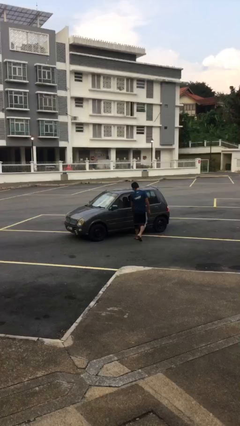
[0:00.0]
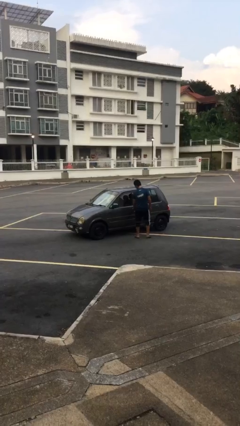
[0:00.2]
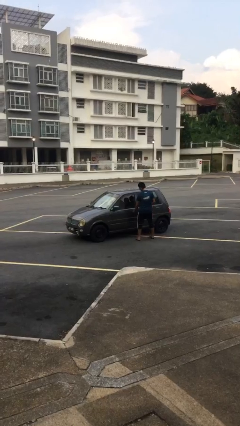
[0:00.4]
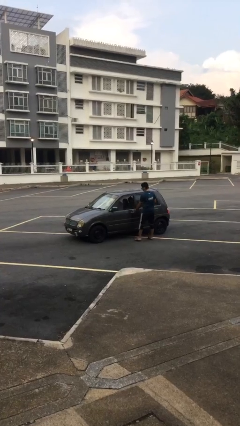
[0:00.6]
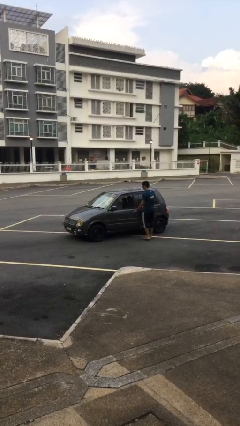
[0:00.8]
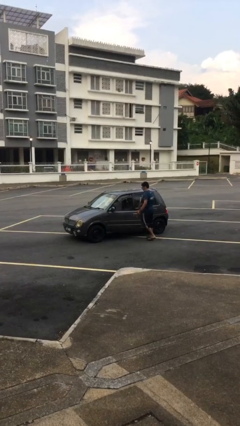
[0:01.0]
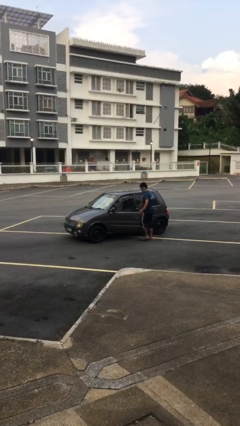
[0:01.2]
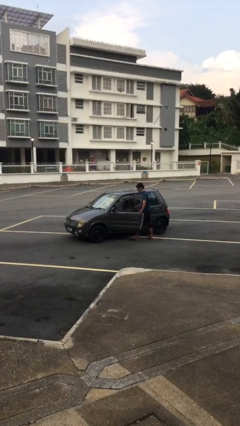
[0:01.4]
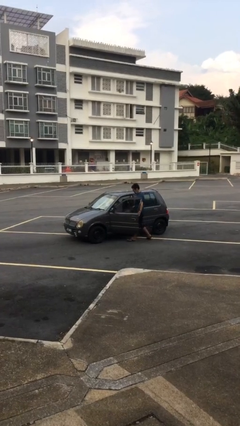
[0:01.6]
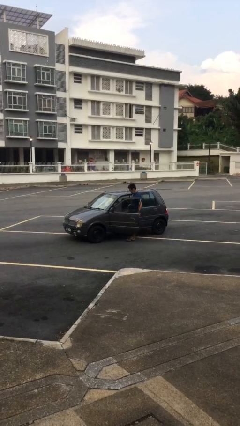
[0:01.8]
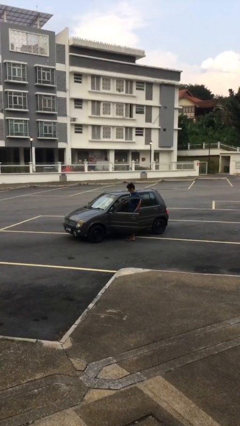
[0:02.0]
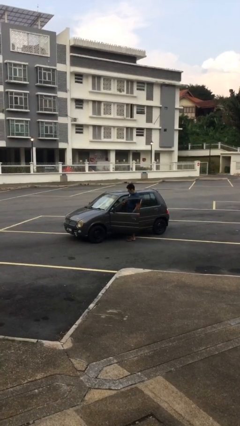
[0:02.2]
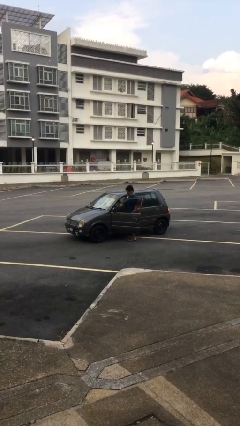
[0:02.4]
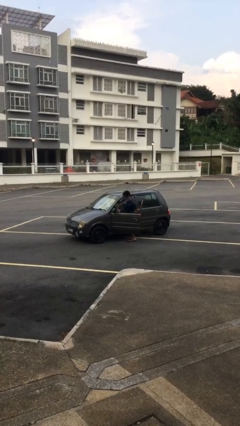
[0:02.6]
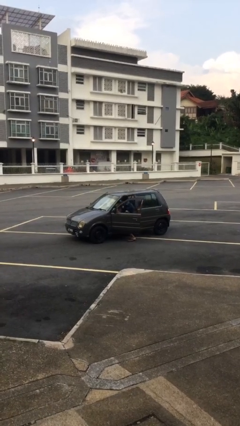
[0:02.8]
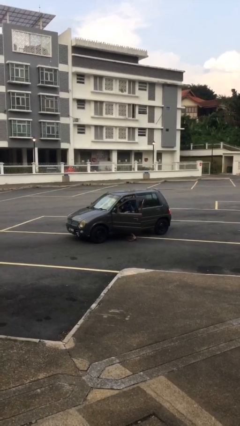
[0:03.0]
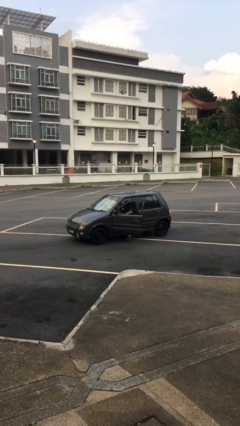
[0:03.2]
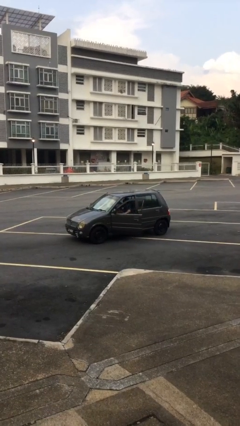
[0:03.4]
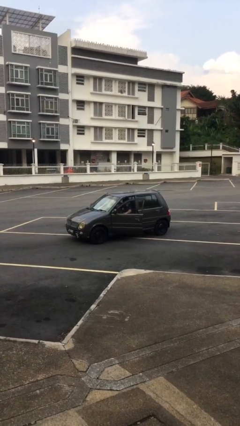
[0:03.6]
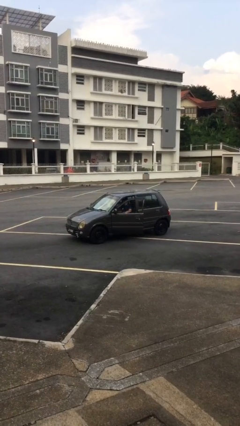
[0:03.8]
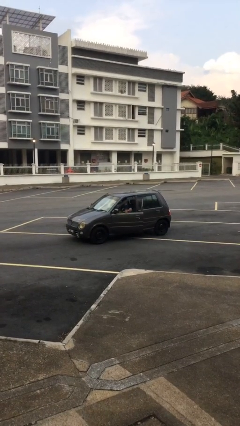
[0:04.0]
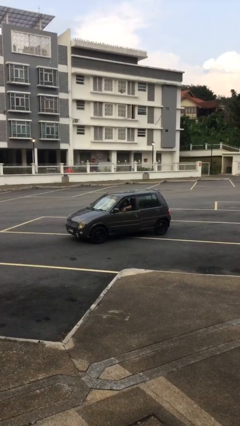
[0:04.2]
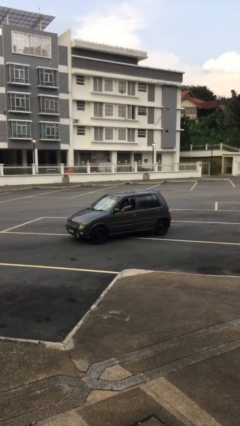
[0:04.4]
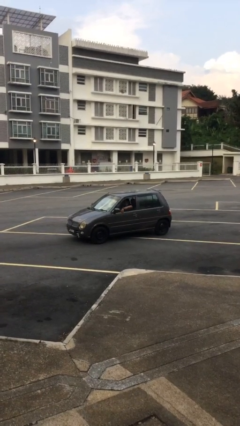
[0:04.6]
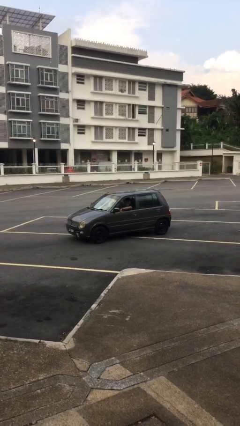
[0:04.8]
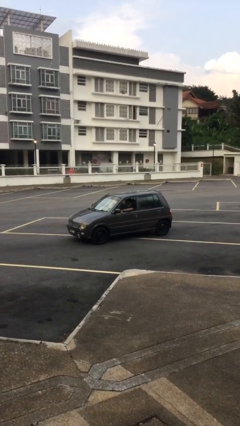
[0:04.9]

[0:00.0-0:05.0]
car picks up person

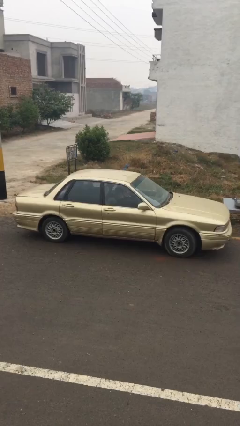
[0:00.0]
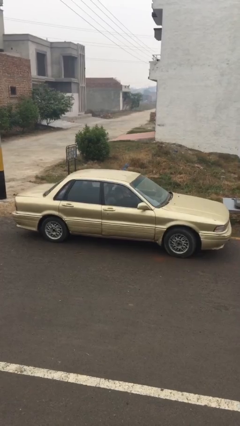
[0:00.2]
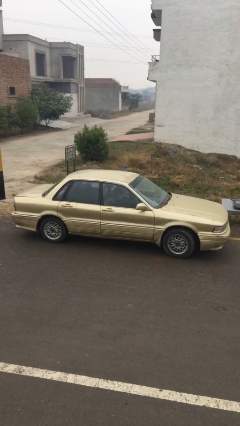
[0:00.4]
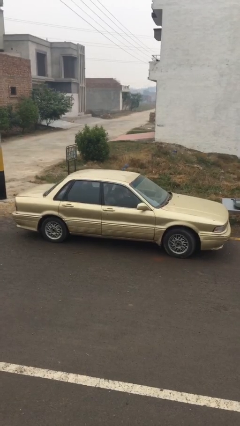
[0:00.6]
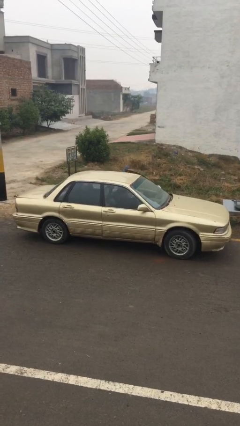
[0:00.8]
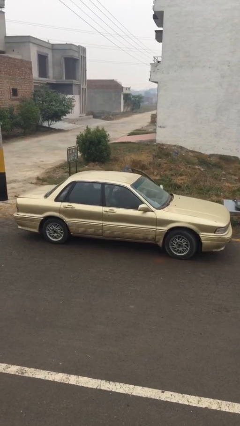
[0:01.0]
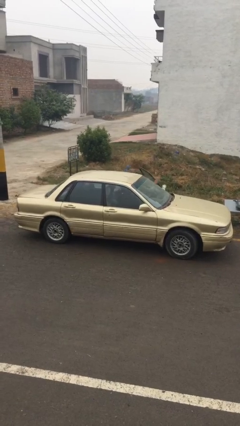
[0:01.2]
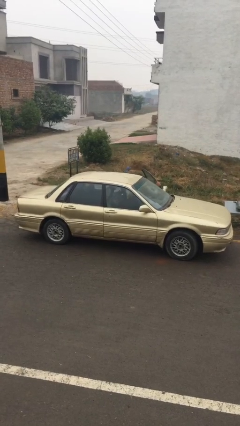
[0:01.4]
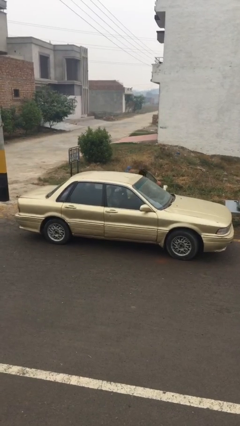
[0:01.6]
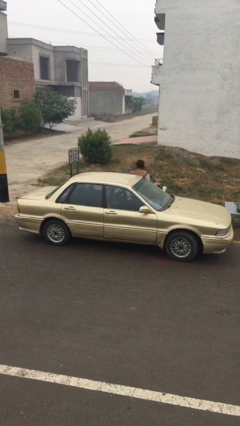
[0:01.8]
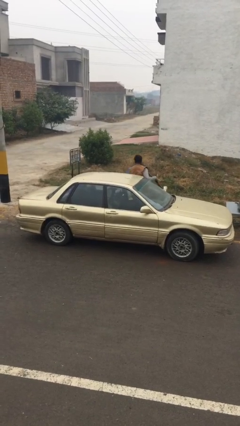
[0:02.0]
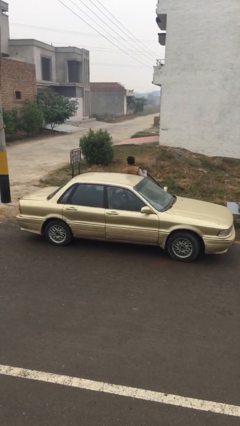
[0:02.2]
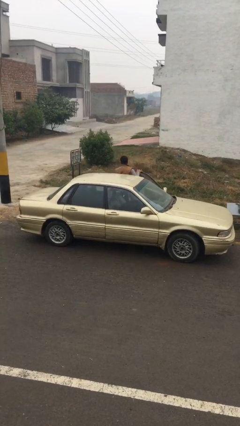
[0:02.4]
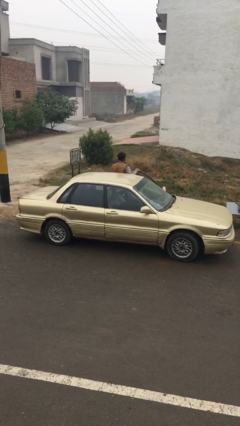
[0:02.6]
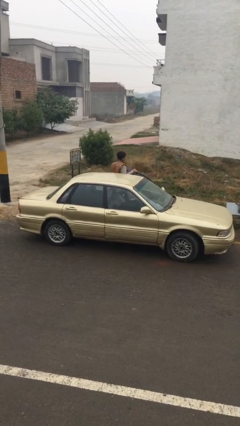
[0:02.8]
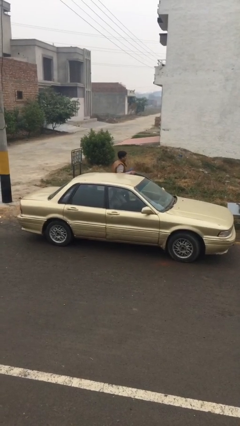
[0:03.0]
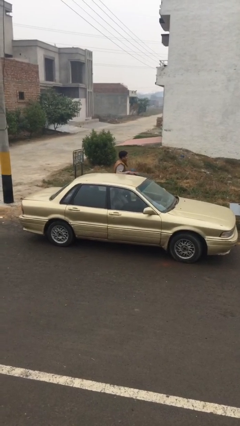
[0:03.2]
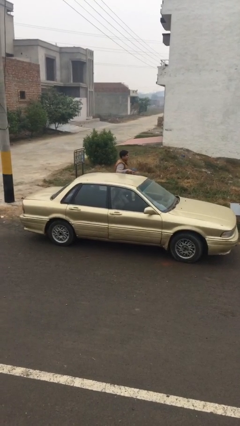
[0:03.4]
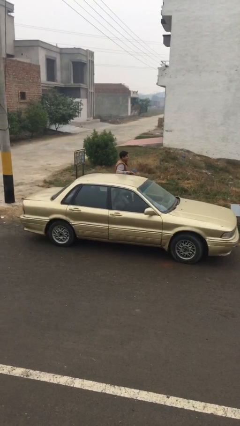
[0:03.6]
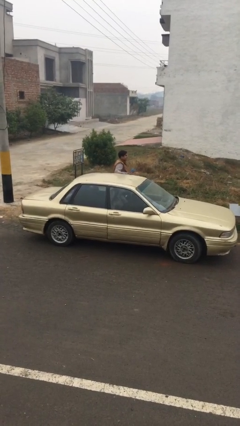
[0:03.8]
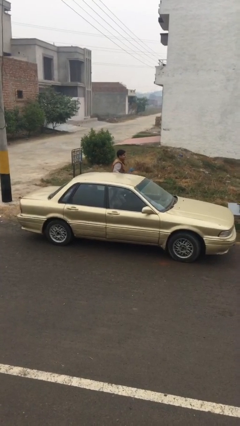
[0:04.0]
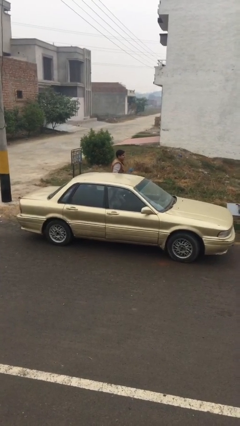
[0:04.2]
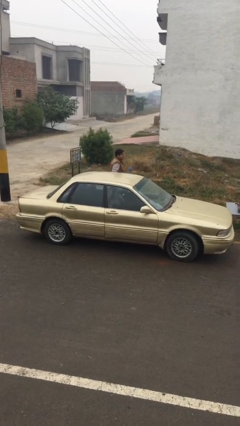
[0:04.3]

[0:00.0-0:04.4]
car drops off person

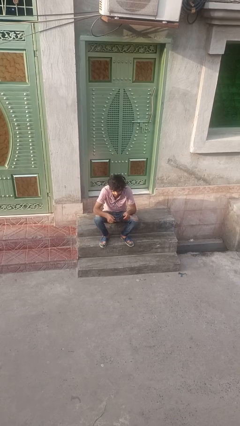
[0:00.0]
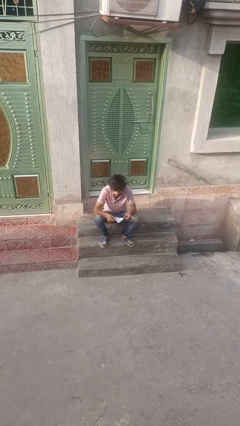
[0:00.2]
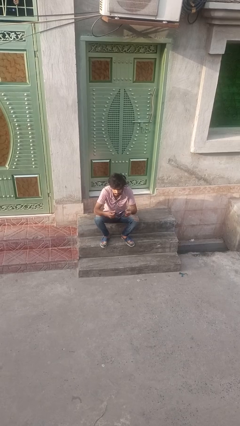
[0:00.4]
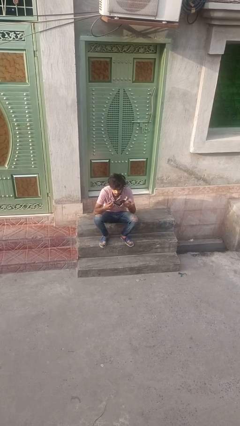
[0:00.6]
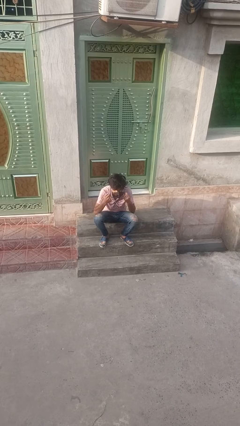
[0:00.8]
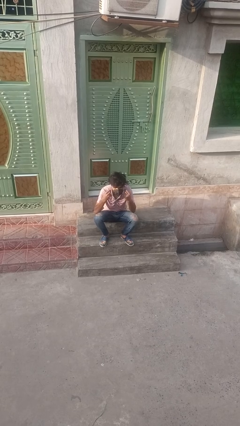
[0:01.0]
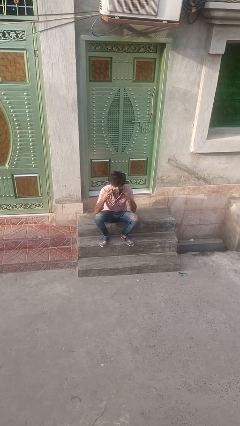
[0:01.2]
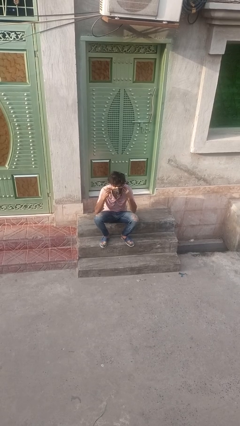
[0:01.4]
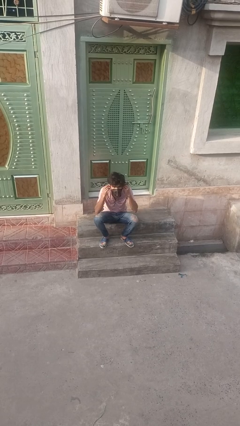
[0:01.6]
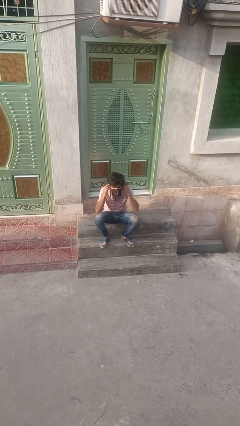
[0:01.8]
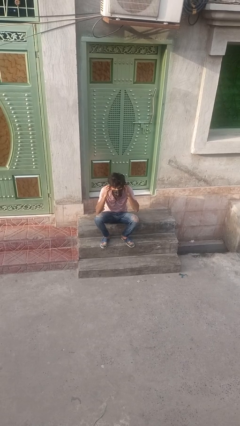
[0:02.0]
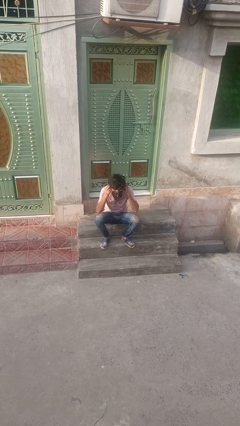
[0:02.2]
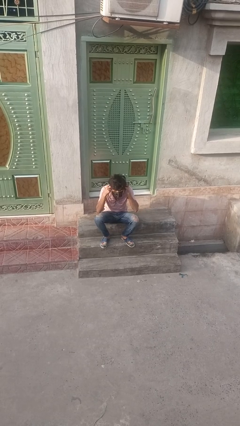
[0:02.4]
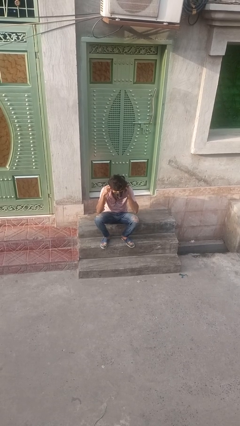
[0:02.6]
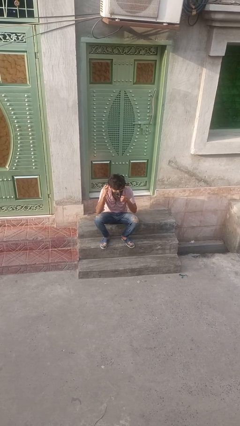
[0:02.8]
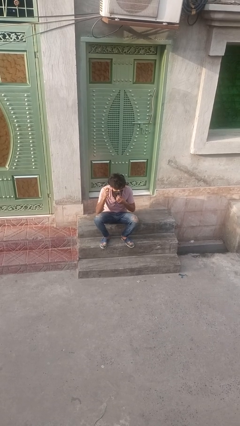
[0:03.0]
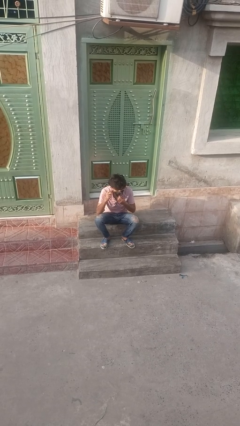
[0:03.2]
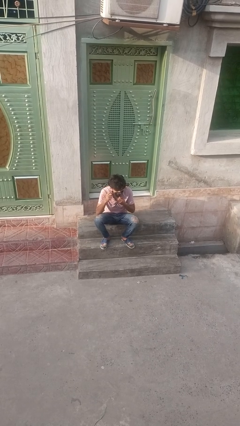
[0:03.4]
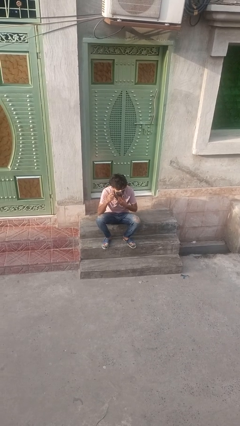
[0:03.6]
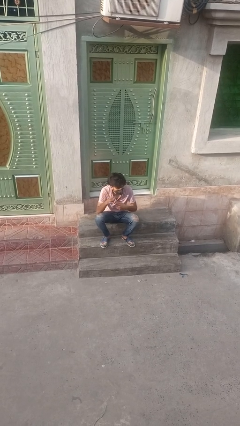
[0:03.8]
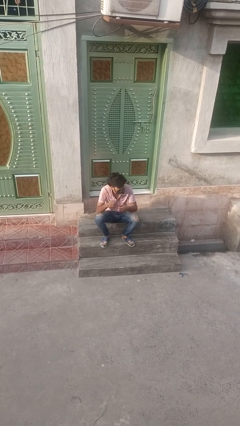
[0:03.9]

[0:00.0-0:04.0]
person puts on facemask

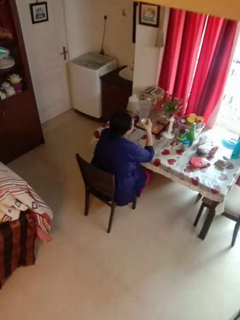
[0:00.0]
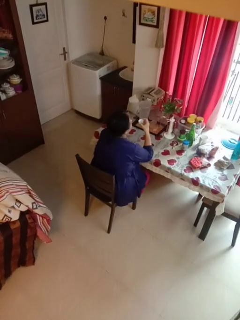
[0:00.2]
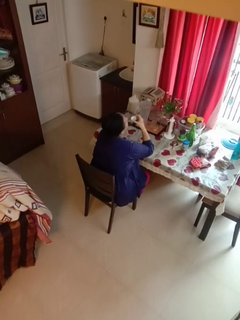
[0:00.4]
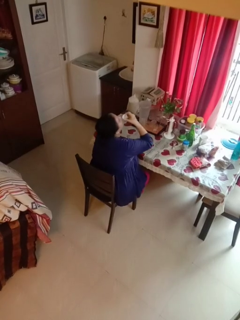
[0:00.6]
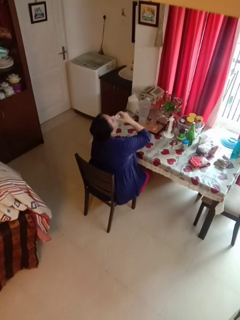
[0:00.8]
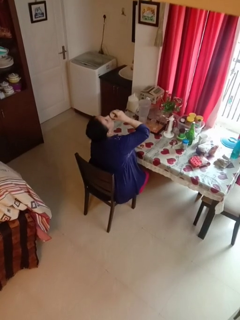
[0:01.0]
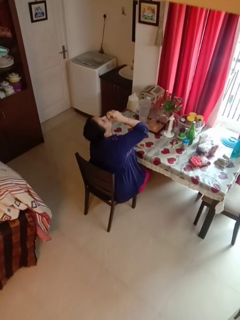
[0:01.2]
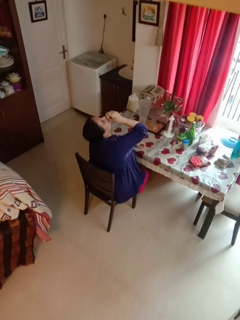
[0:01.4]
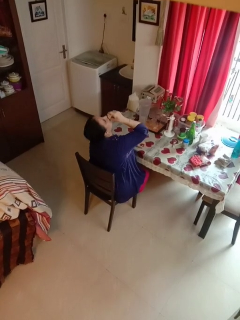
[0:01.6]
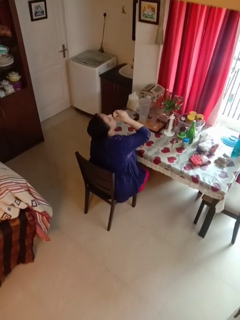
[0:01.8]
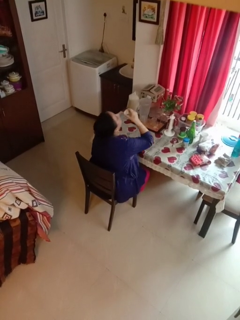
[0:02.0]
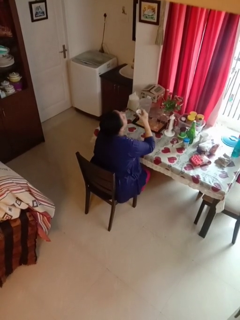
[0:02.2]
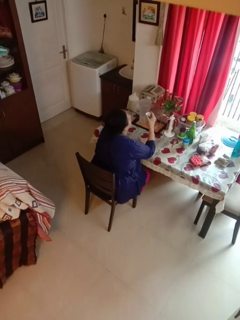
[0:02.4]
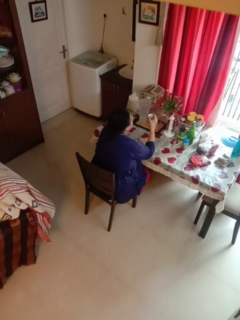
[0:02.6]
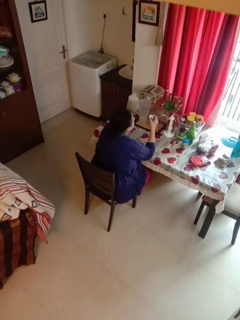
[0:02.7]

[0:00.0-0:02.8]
person drinks from shotglass

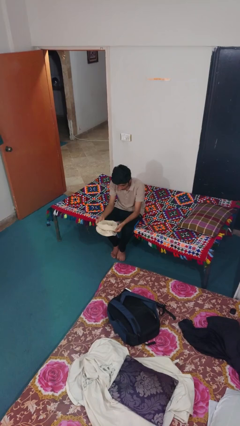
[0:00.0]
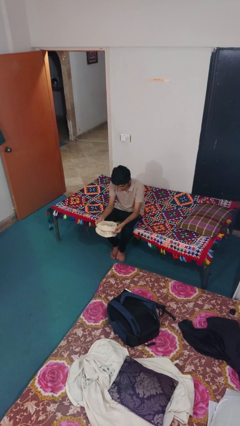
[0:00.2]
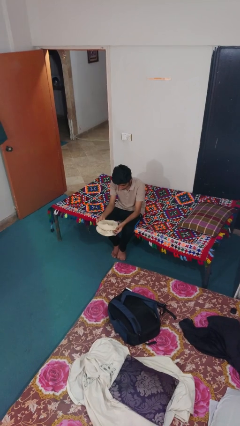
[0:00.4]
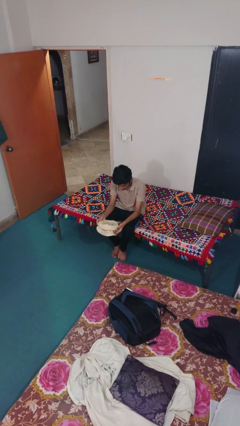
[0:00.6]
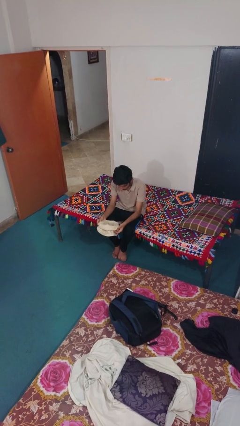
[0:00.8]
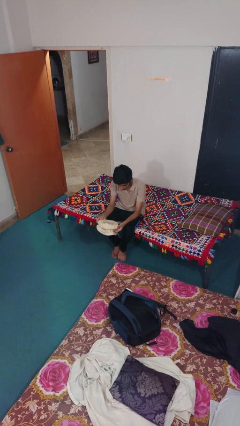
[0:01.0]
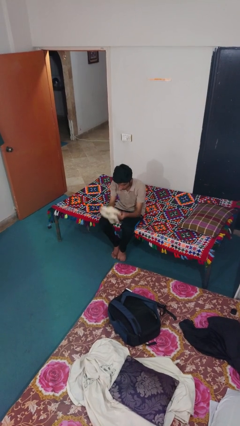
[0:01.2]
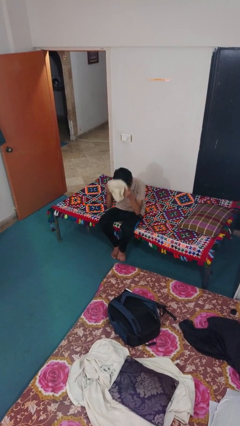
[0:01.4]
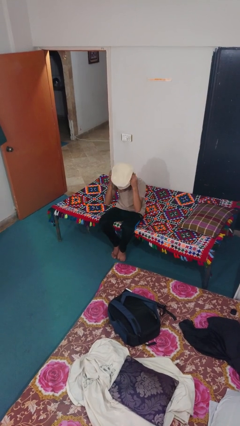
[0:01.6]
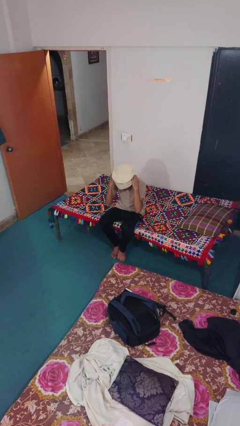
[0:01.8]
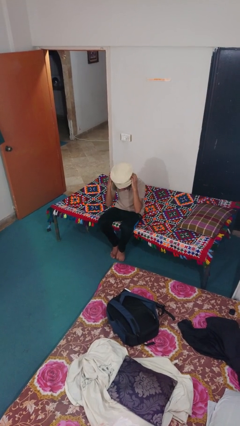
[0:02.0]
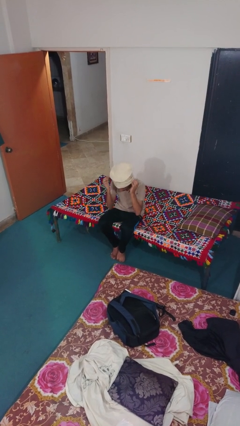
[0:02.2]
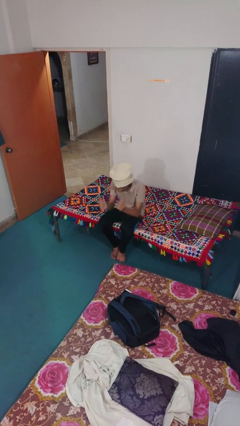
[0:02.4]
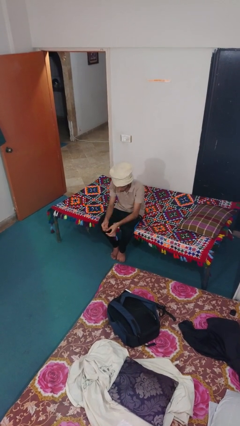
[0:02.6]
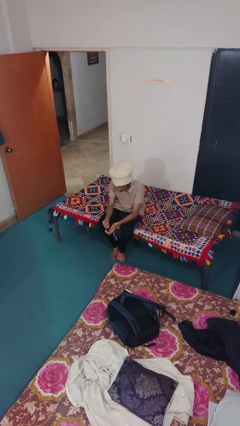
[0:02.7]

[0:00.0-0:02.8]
person puts on hat
